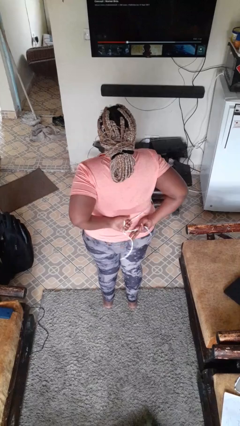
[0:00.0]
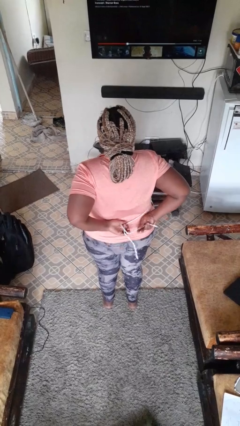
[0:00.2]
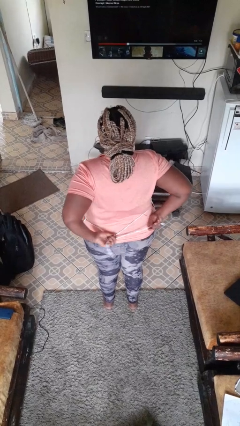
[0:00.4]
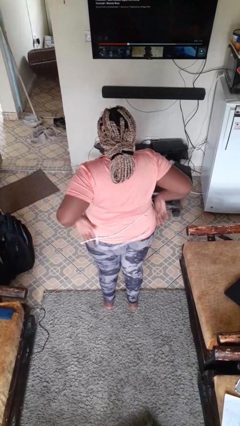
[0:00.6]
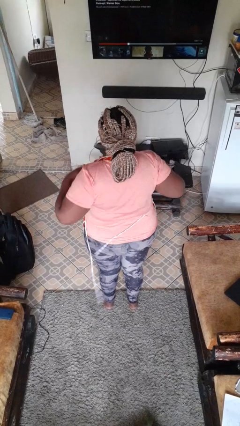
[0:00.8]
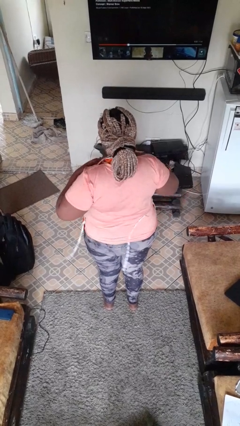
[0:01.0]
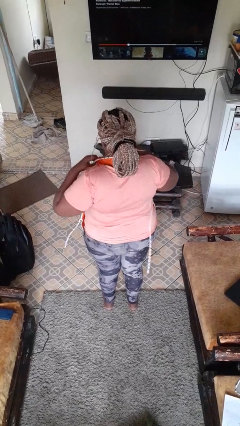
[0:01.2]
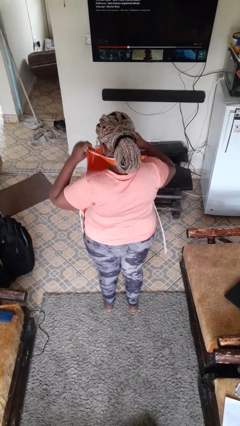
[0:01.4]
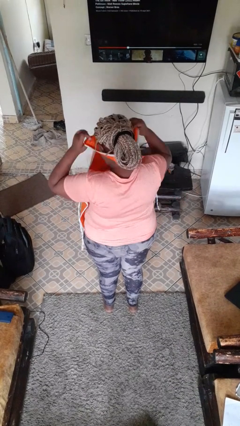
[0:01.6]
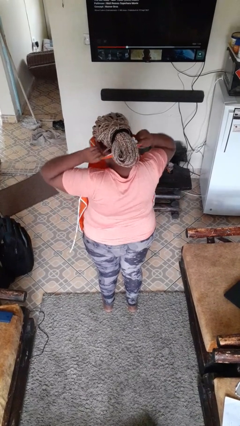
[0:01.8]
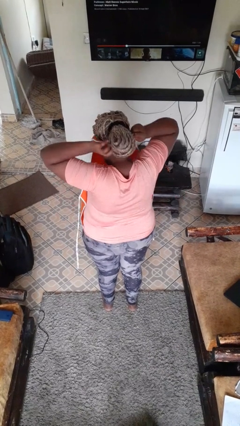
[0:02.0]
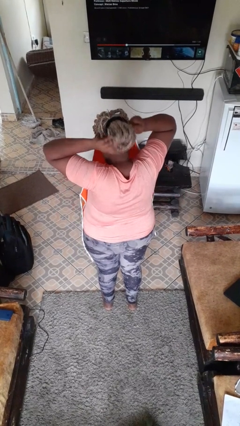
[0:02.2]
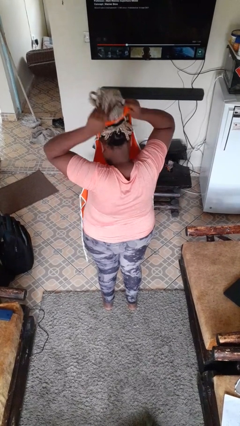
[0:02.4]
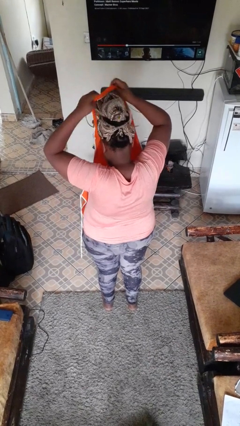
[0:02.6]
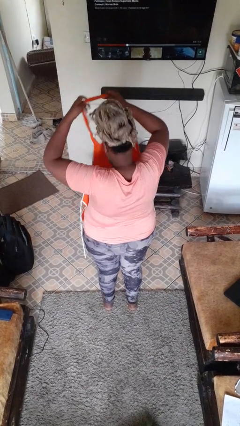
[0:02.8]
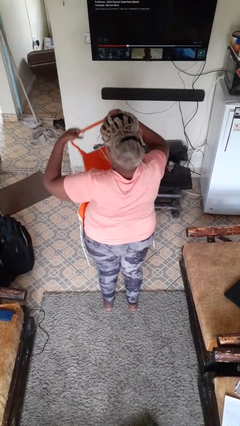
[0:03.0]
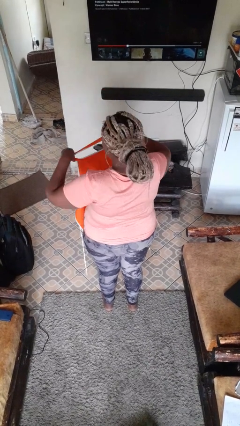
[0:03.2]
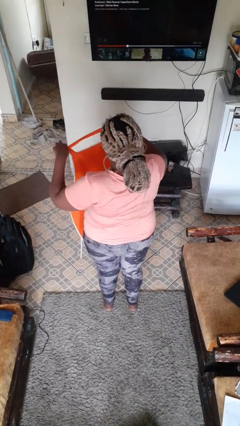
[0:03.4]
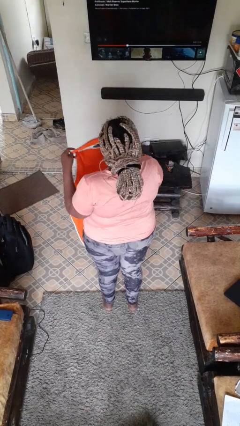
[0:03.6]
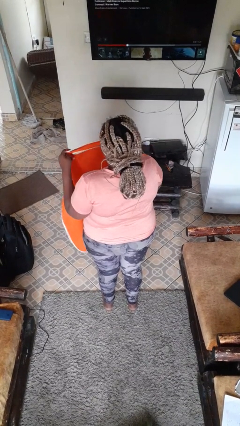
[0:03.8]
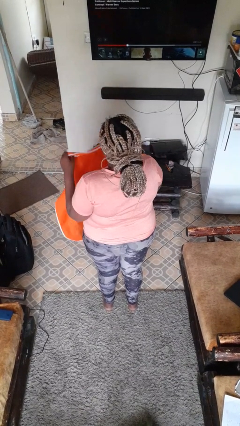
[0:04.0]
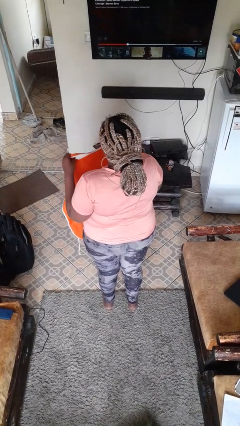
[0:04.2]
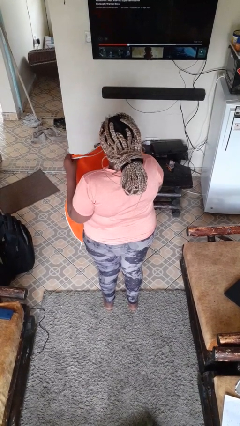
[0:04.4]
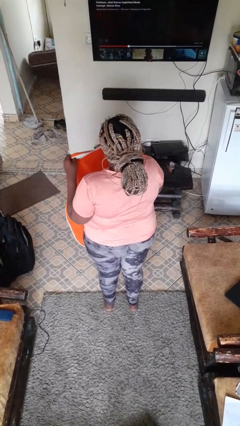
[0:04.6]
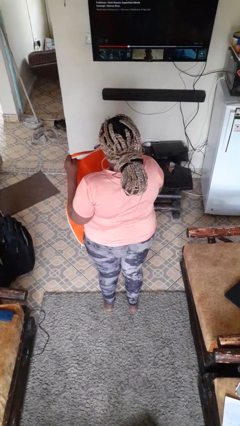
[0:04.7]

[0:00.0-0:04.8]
person puts on apron

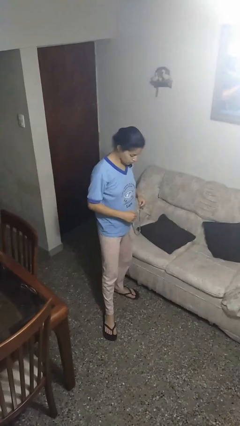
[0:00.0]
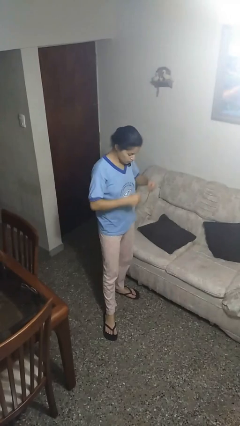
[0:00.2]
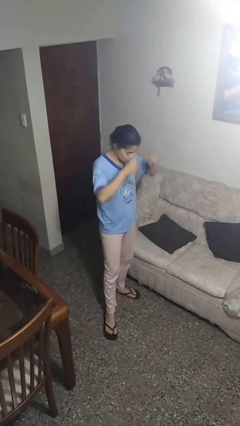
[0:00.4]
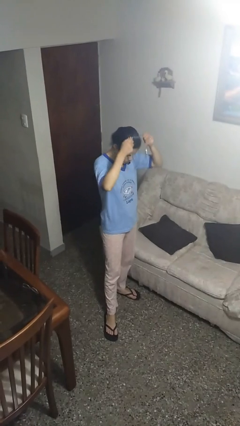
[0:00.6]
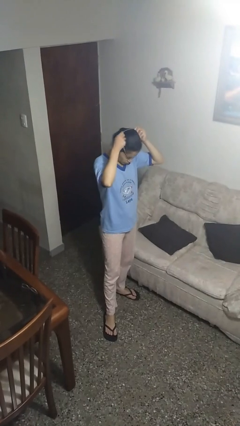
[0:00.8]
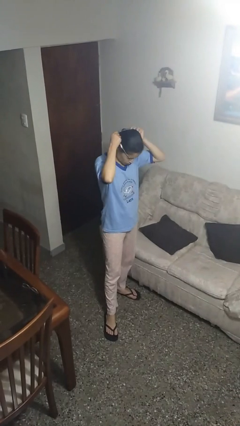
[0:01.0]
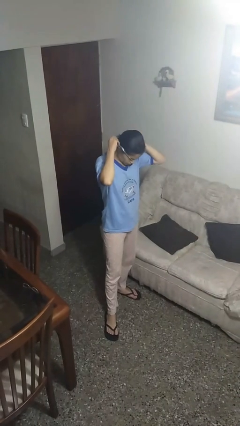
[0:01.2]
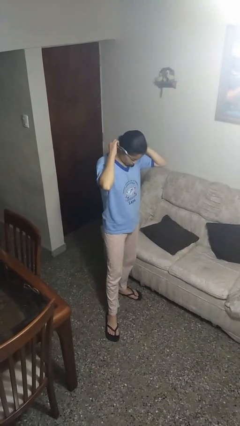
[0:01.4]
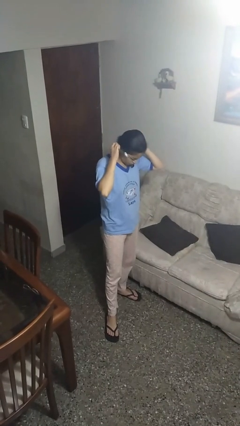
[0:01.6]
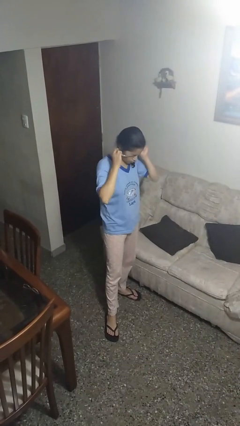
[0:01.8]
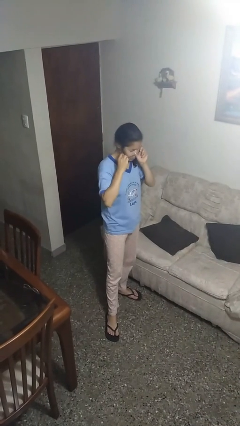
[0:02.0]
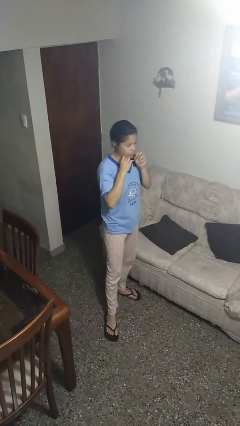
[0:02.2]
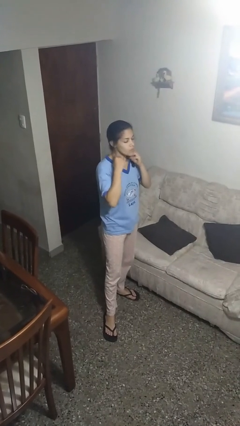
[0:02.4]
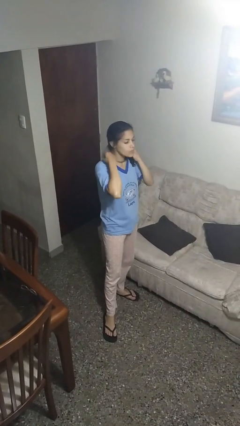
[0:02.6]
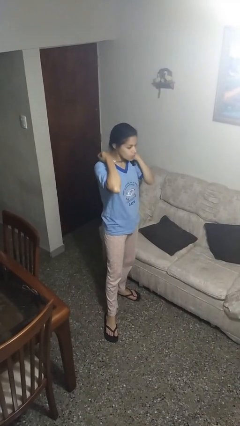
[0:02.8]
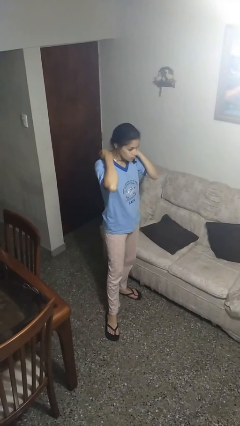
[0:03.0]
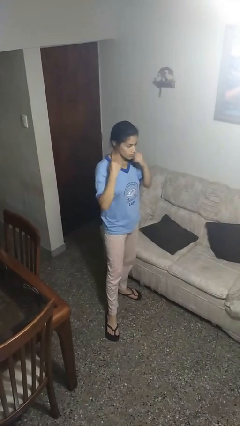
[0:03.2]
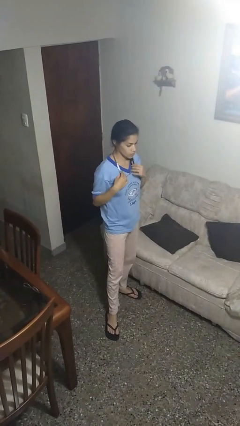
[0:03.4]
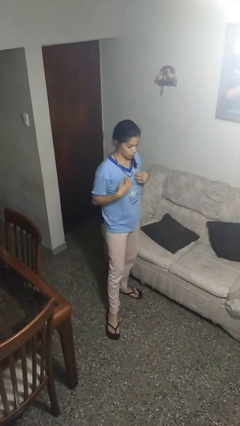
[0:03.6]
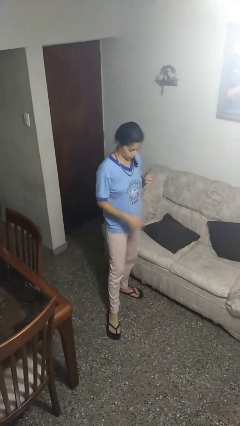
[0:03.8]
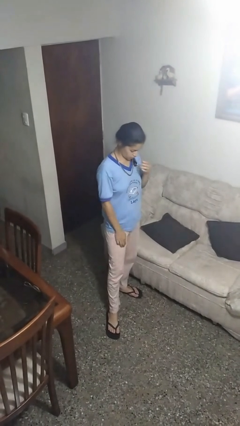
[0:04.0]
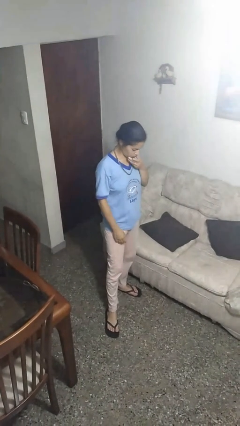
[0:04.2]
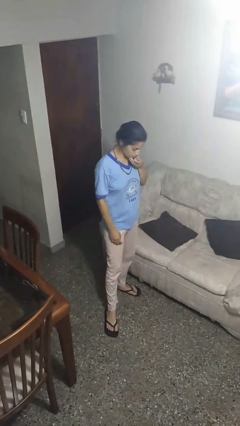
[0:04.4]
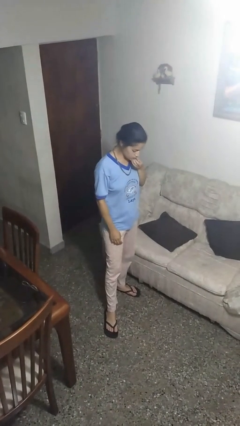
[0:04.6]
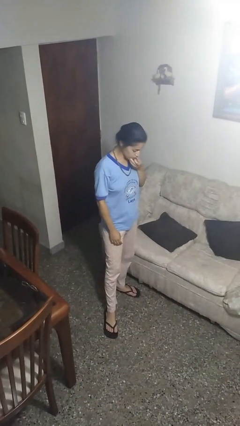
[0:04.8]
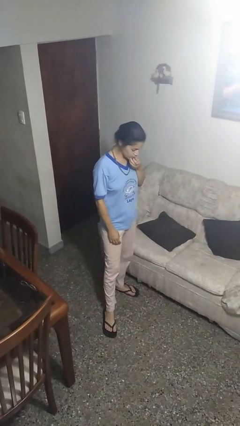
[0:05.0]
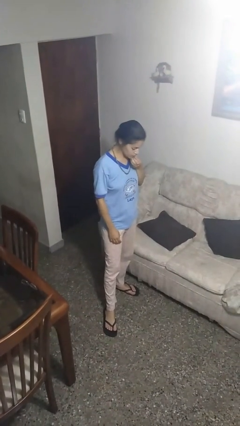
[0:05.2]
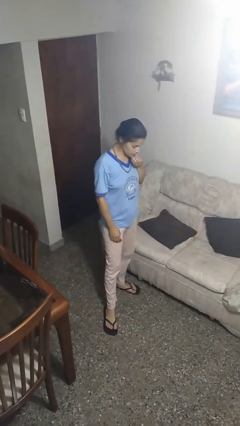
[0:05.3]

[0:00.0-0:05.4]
person puts on necklace

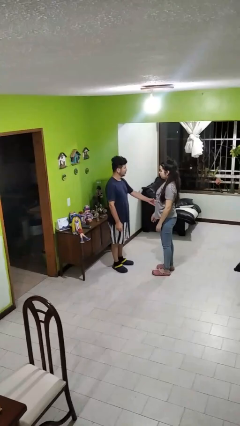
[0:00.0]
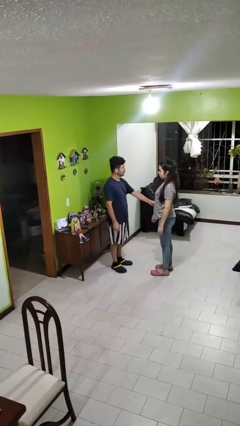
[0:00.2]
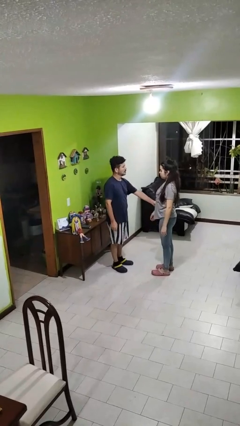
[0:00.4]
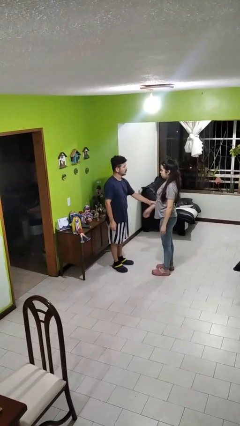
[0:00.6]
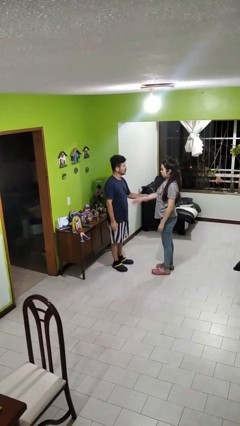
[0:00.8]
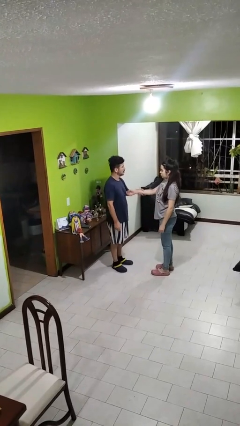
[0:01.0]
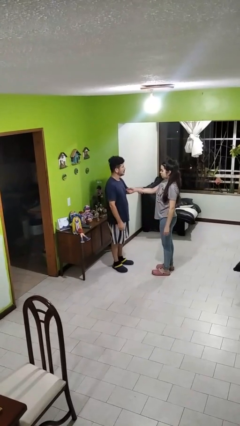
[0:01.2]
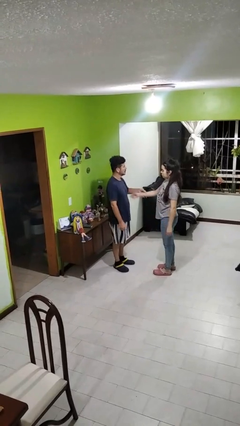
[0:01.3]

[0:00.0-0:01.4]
person grabs person by forearm

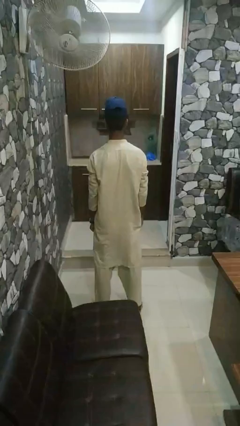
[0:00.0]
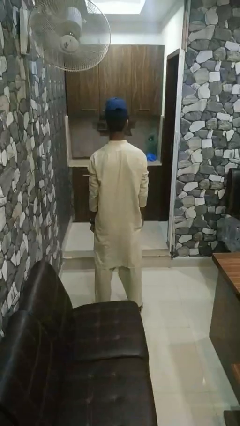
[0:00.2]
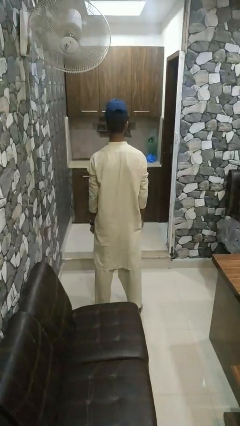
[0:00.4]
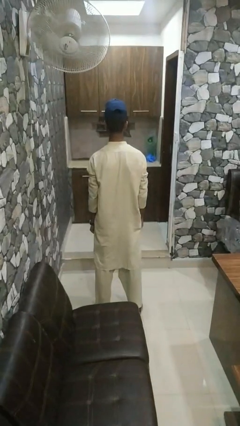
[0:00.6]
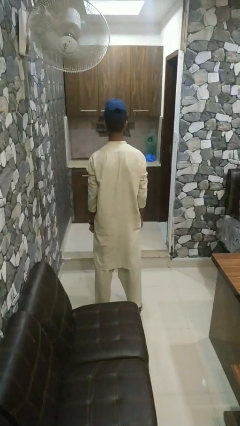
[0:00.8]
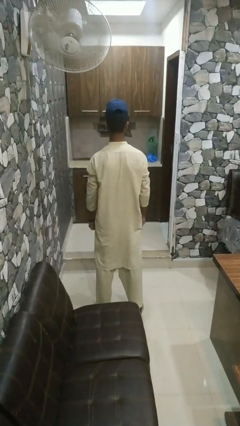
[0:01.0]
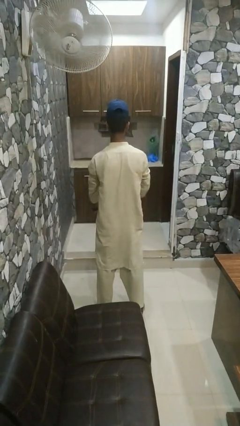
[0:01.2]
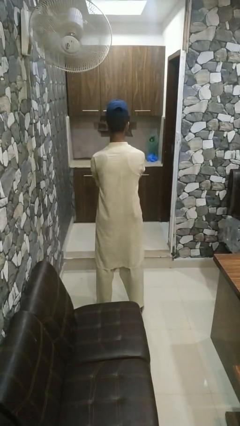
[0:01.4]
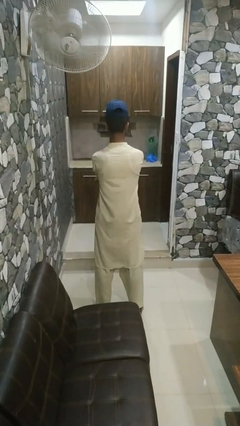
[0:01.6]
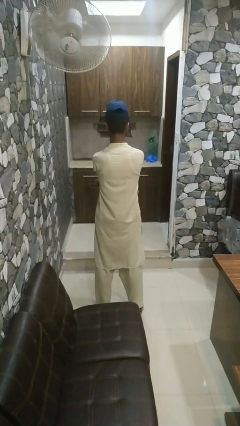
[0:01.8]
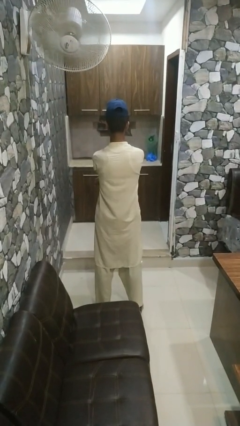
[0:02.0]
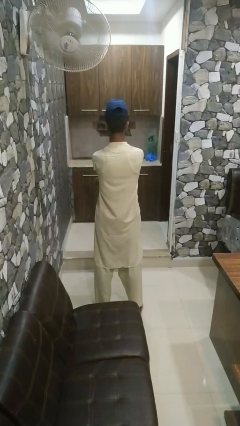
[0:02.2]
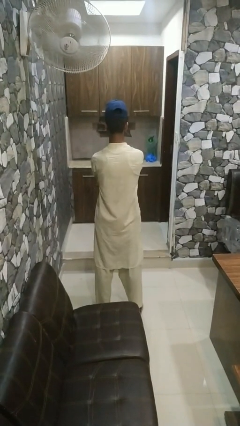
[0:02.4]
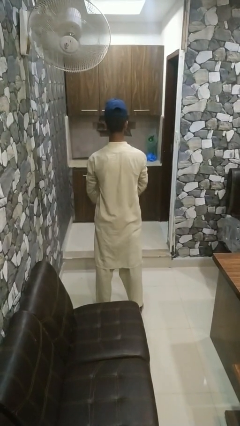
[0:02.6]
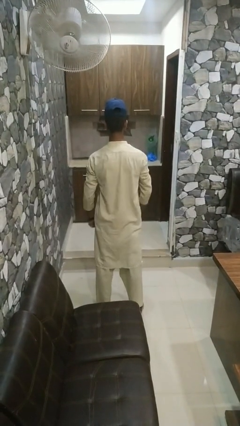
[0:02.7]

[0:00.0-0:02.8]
person crosses arms

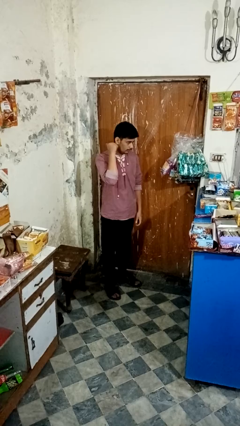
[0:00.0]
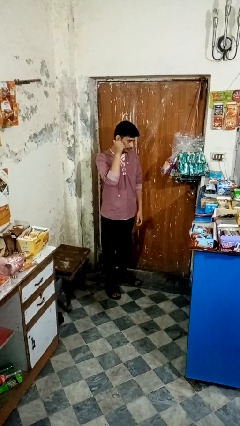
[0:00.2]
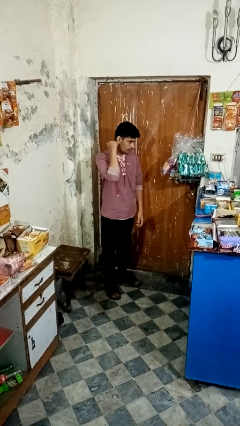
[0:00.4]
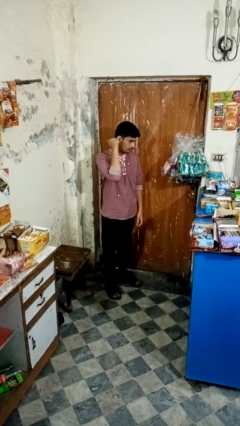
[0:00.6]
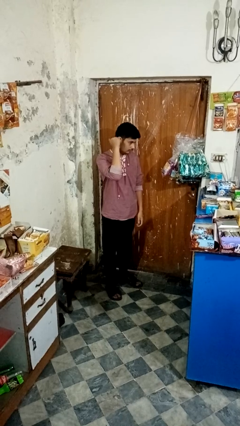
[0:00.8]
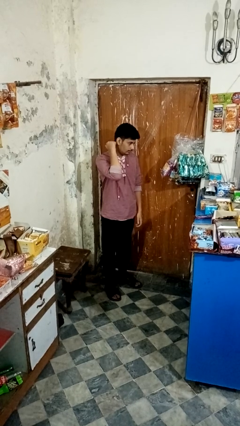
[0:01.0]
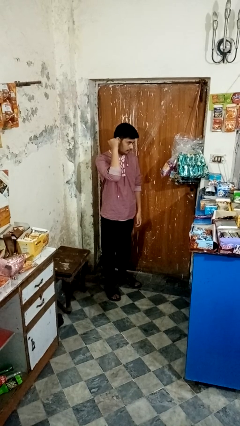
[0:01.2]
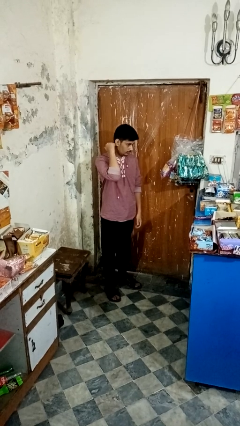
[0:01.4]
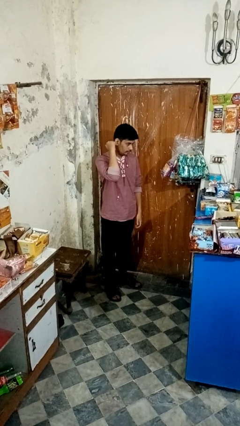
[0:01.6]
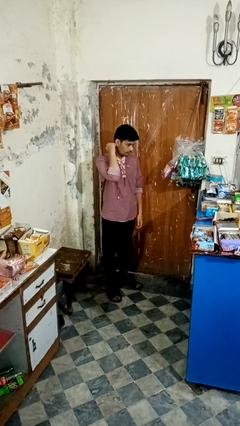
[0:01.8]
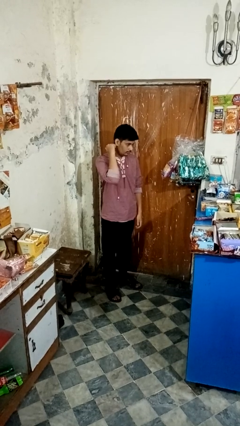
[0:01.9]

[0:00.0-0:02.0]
person gestures behind me

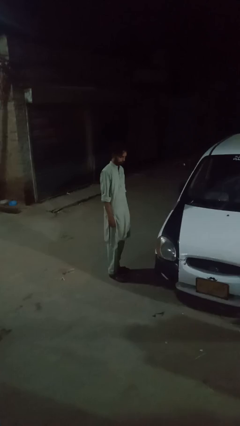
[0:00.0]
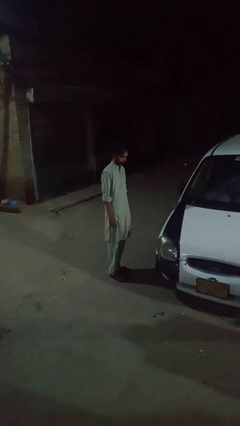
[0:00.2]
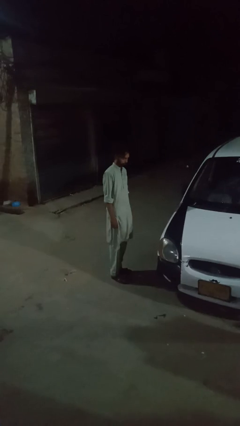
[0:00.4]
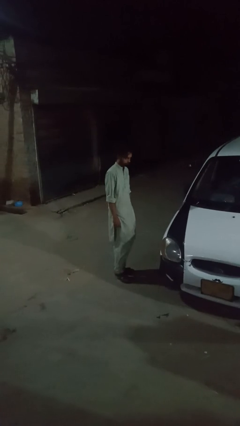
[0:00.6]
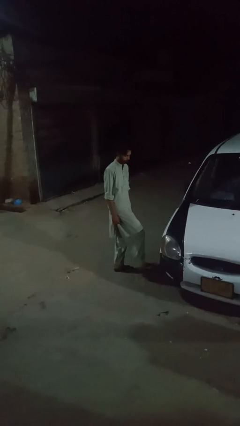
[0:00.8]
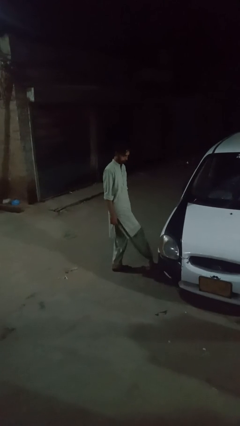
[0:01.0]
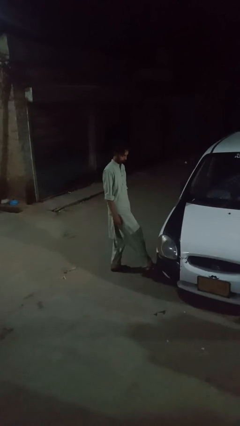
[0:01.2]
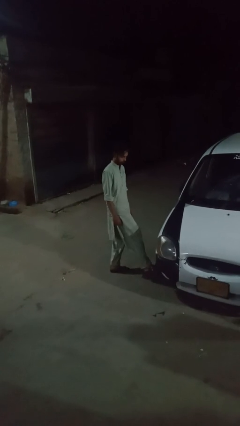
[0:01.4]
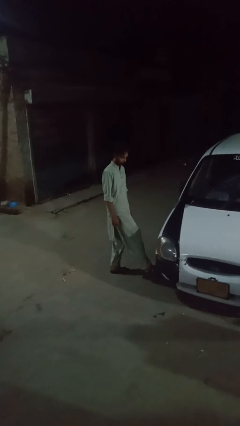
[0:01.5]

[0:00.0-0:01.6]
person kicks car tires
